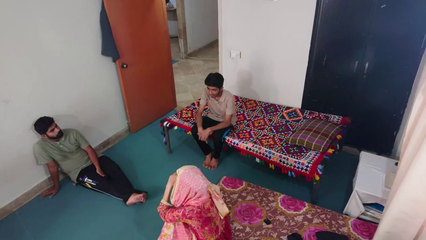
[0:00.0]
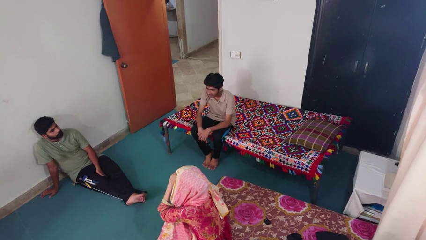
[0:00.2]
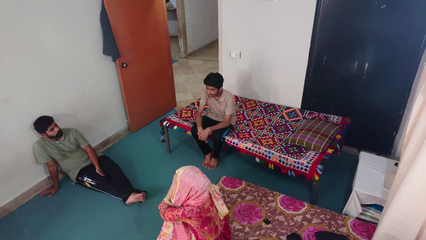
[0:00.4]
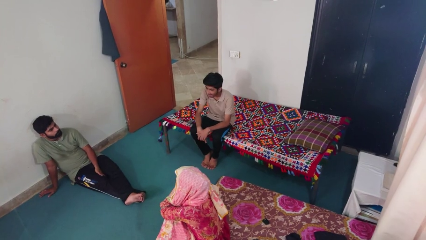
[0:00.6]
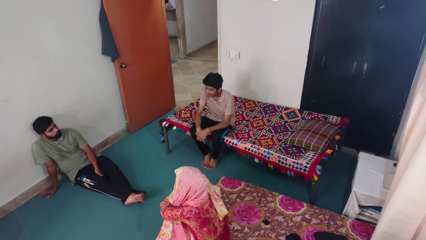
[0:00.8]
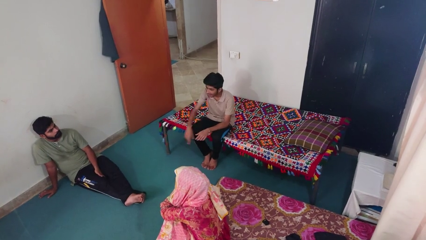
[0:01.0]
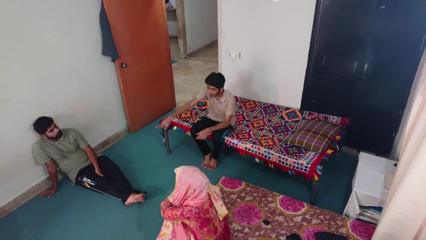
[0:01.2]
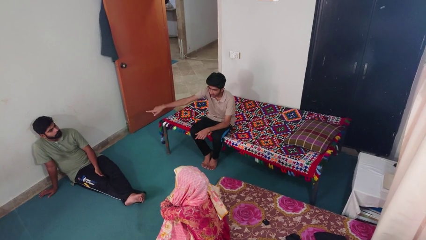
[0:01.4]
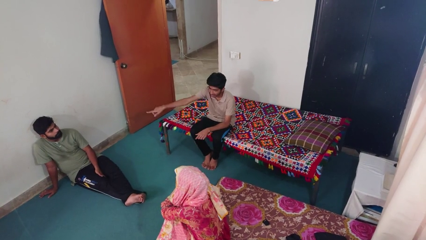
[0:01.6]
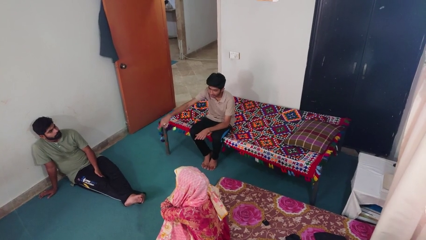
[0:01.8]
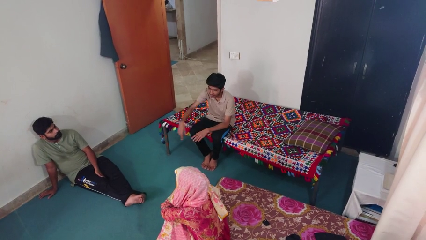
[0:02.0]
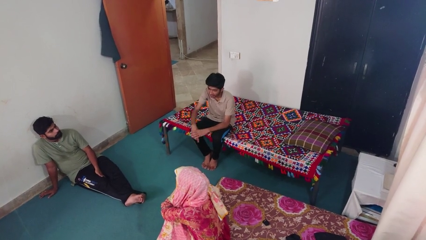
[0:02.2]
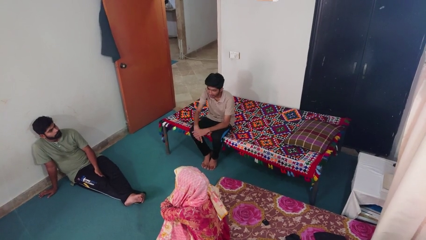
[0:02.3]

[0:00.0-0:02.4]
person points at person

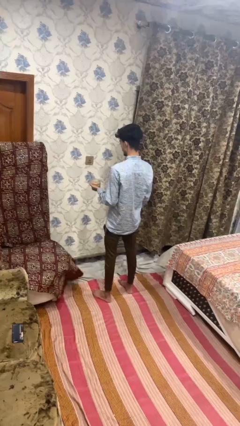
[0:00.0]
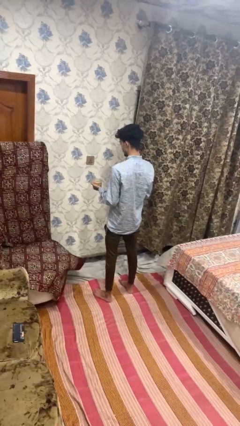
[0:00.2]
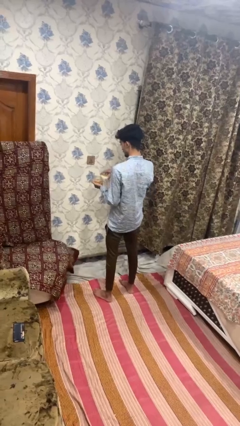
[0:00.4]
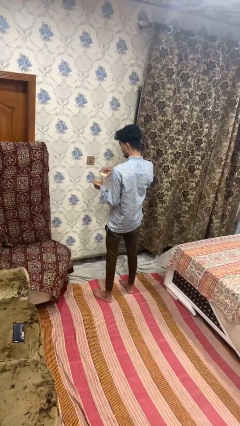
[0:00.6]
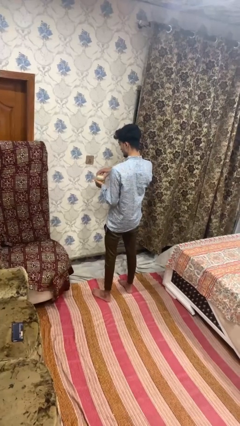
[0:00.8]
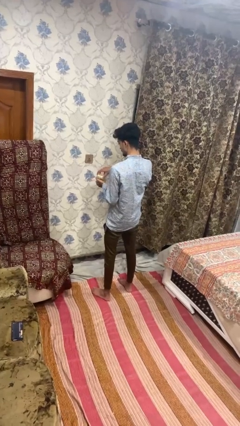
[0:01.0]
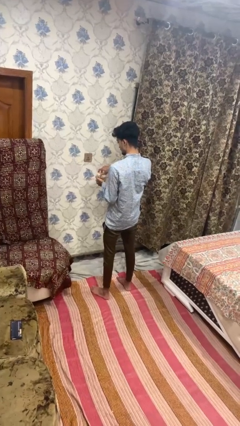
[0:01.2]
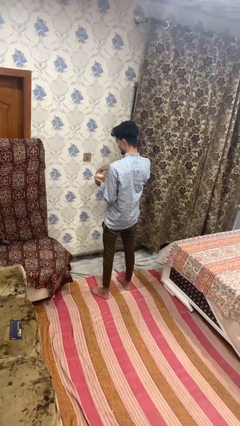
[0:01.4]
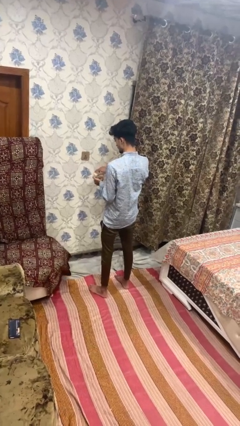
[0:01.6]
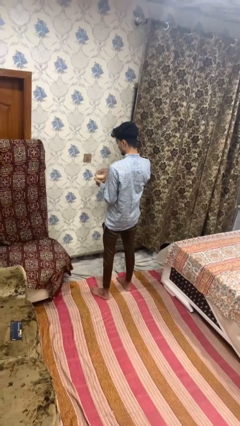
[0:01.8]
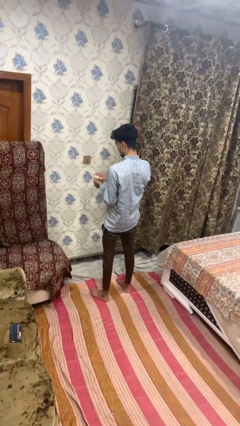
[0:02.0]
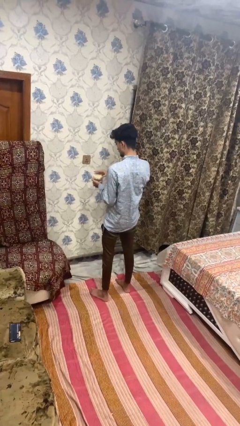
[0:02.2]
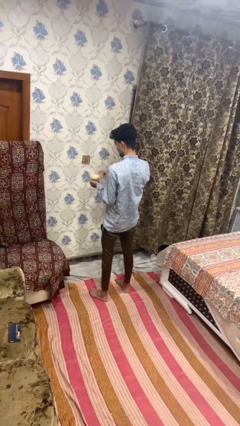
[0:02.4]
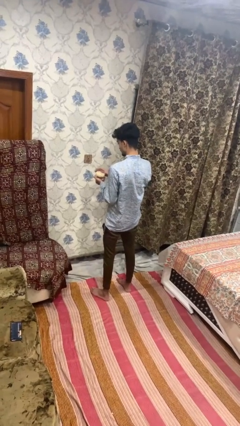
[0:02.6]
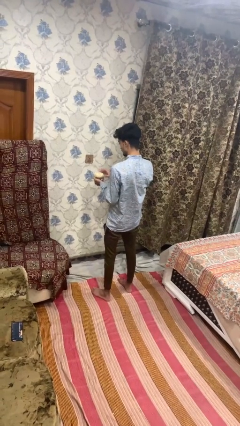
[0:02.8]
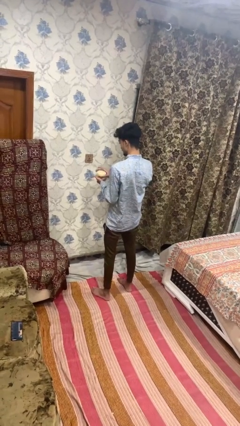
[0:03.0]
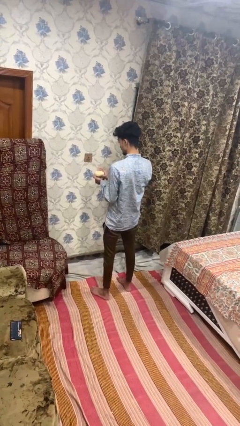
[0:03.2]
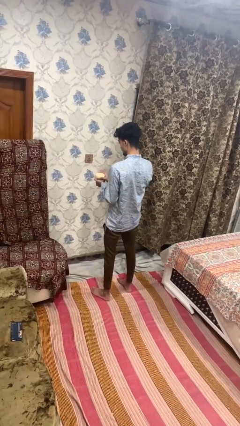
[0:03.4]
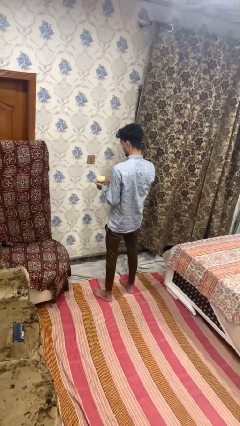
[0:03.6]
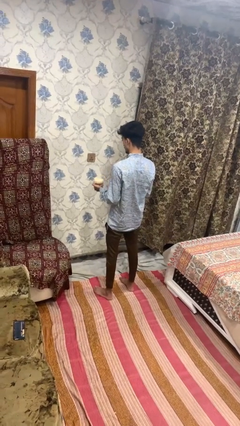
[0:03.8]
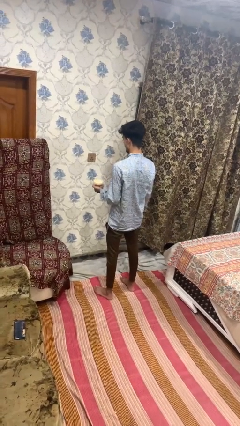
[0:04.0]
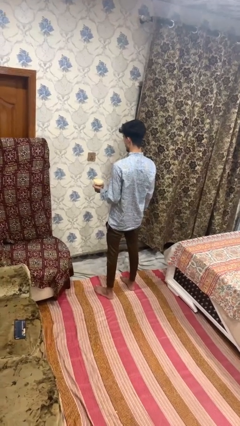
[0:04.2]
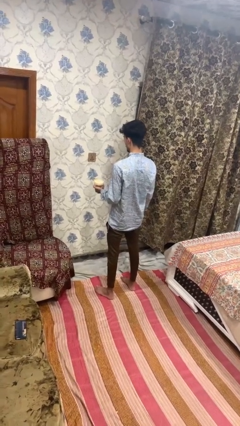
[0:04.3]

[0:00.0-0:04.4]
person closes jar

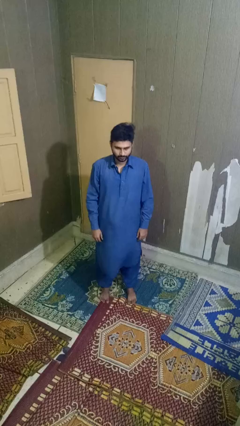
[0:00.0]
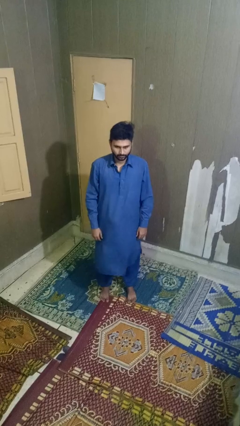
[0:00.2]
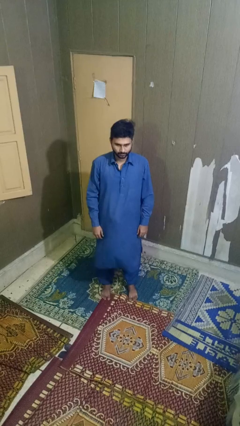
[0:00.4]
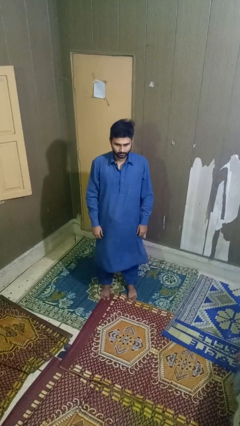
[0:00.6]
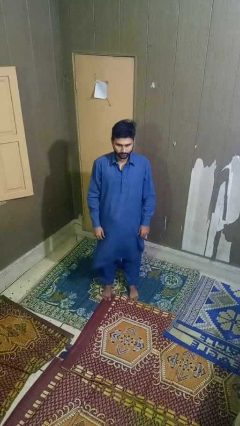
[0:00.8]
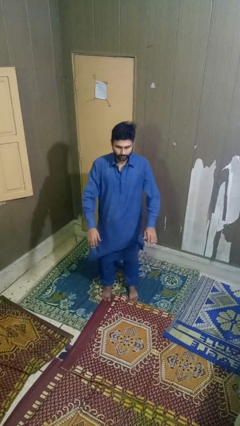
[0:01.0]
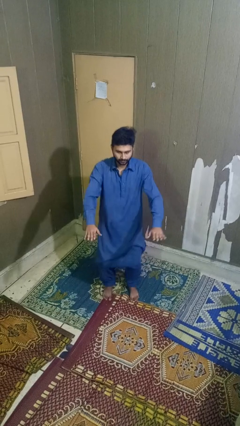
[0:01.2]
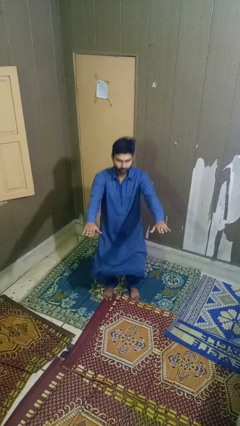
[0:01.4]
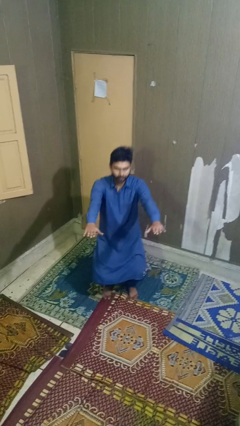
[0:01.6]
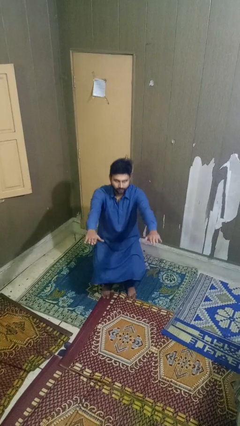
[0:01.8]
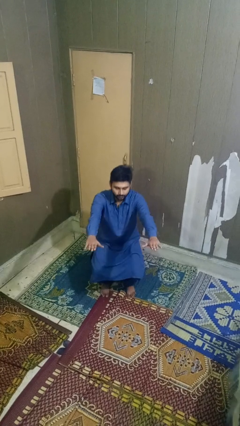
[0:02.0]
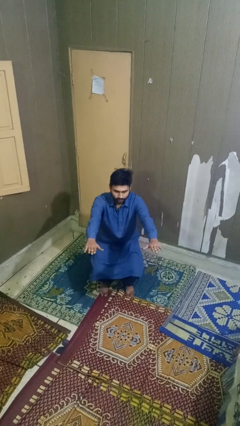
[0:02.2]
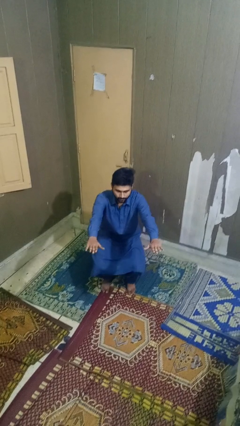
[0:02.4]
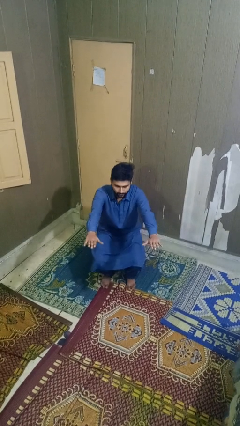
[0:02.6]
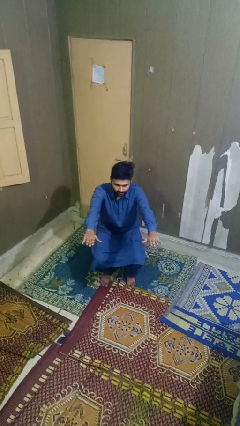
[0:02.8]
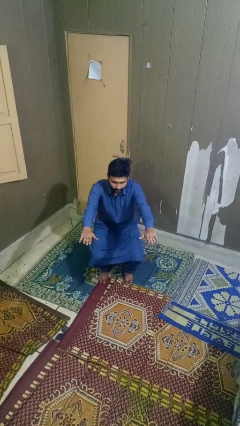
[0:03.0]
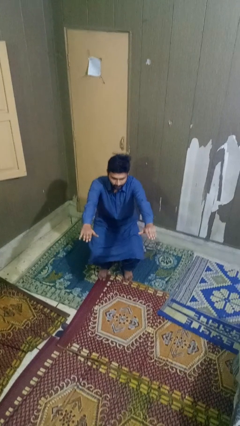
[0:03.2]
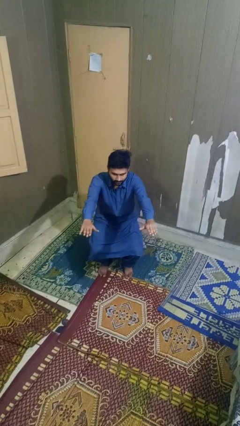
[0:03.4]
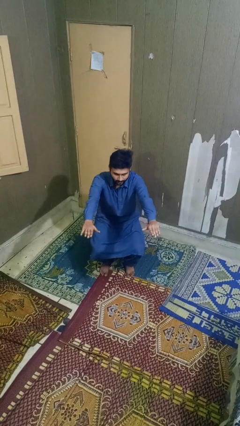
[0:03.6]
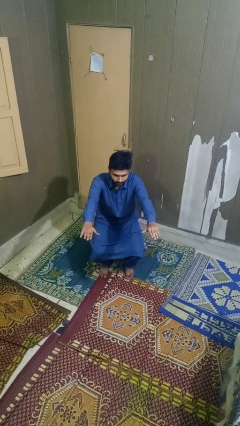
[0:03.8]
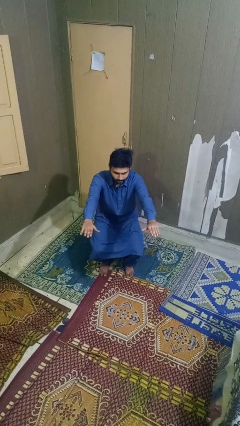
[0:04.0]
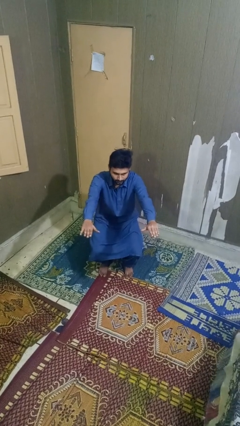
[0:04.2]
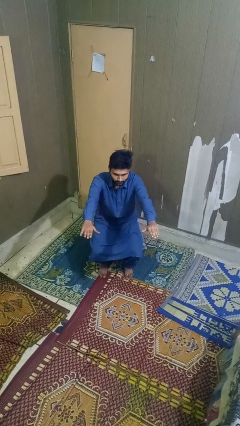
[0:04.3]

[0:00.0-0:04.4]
person squats

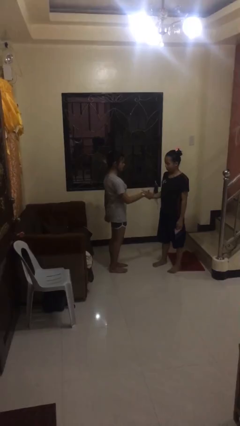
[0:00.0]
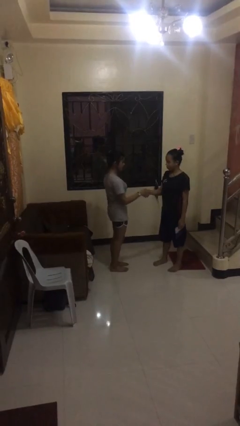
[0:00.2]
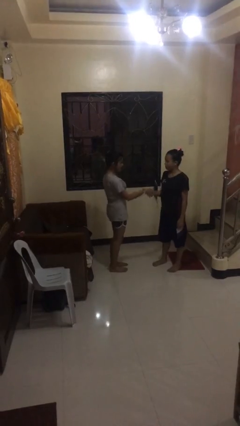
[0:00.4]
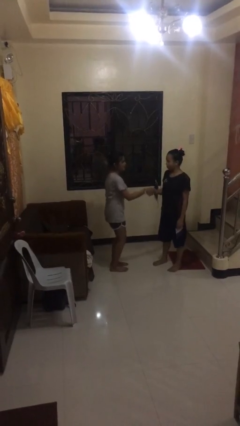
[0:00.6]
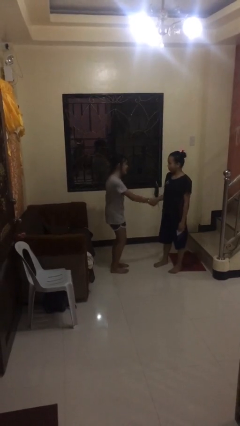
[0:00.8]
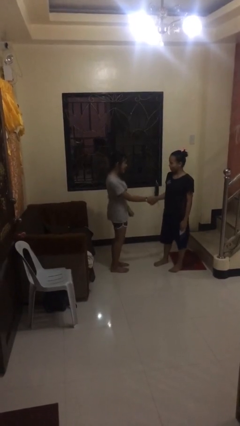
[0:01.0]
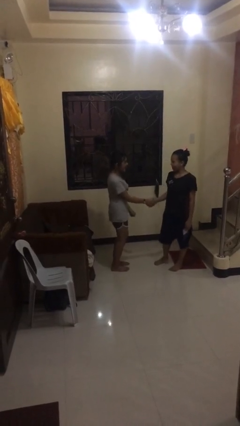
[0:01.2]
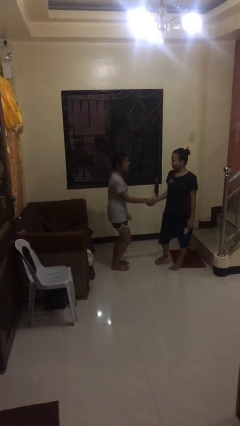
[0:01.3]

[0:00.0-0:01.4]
person shakes hand

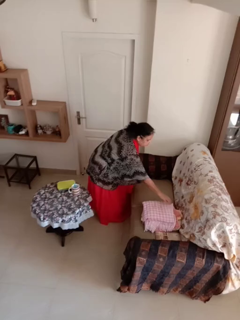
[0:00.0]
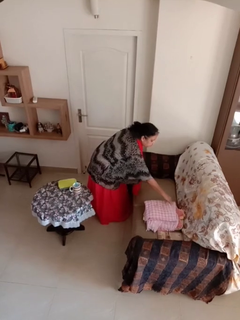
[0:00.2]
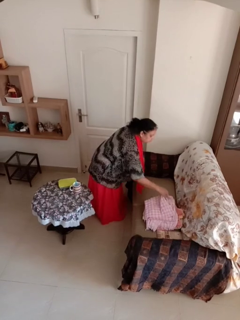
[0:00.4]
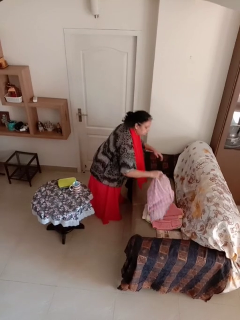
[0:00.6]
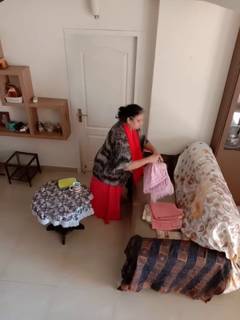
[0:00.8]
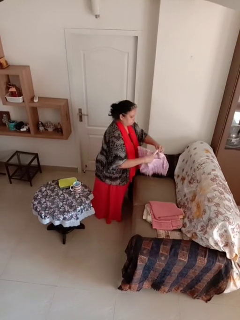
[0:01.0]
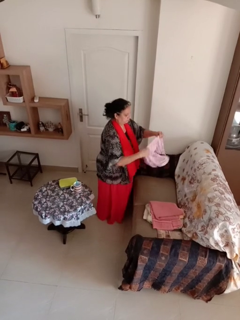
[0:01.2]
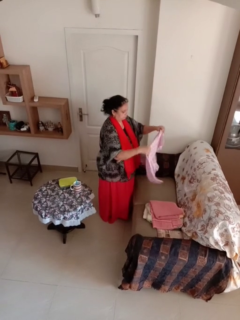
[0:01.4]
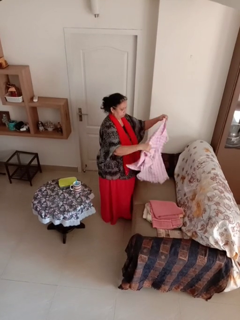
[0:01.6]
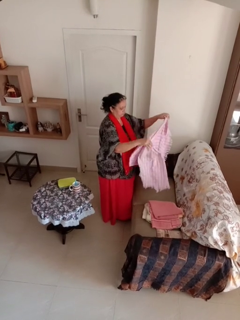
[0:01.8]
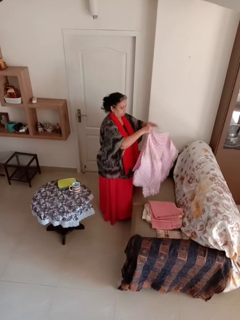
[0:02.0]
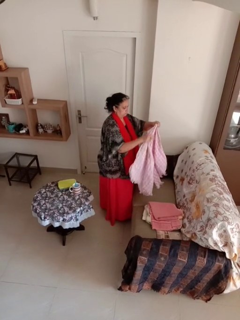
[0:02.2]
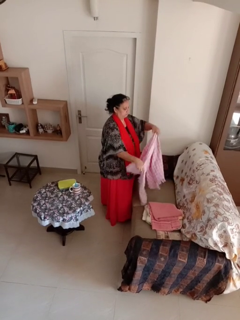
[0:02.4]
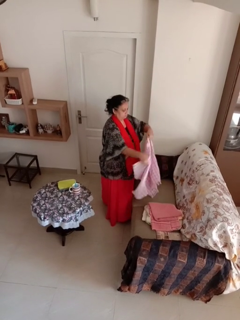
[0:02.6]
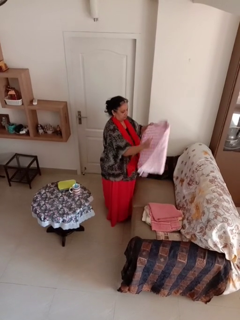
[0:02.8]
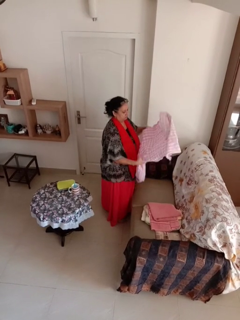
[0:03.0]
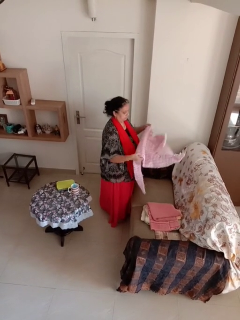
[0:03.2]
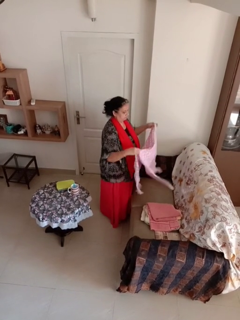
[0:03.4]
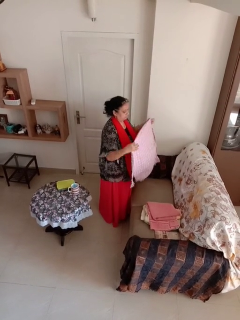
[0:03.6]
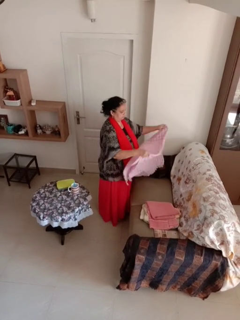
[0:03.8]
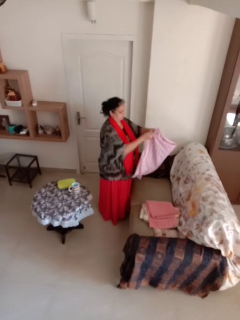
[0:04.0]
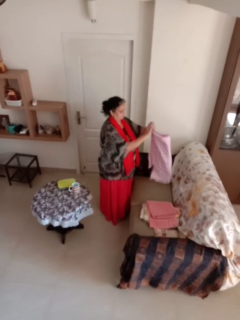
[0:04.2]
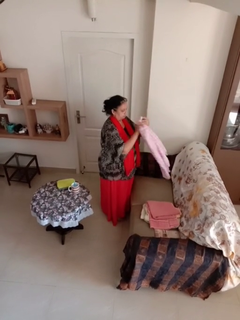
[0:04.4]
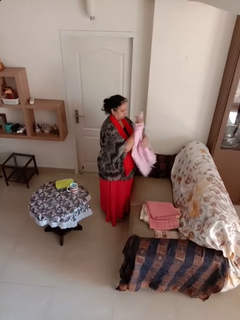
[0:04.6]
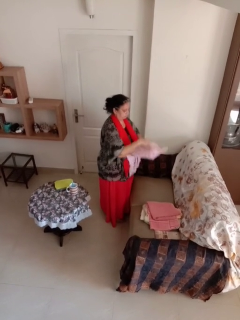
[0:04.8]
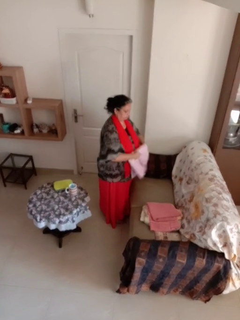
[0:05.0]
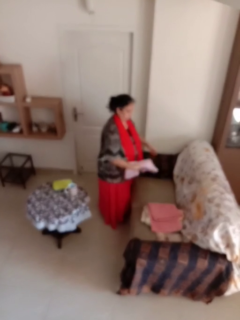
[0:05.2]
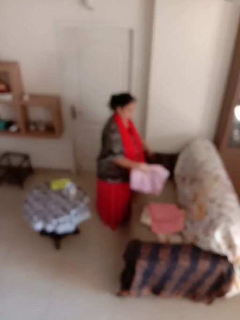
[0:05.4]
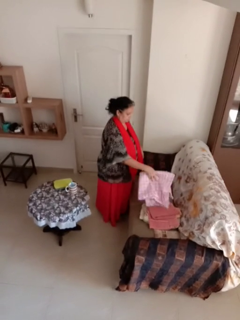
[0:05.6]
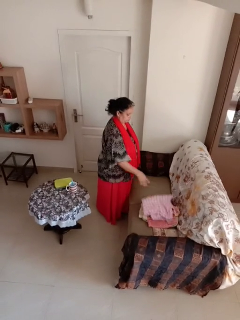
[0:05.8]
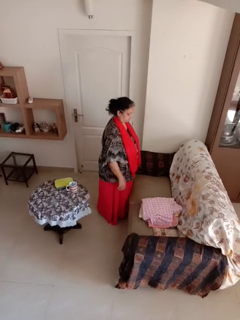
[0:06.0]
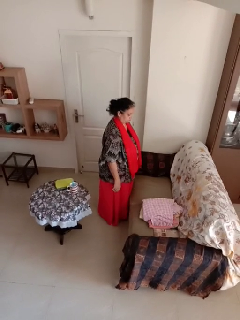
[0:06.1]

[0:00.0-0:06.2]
person folds towel
